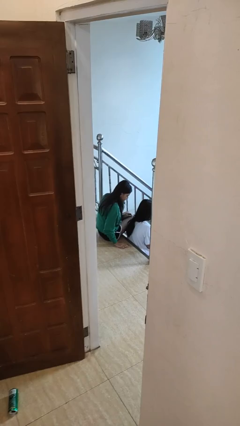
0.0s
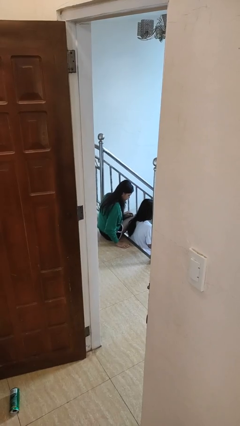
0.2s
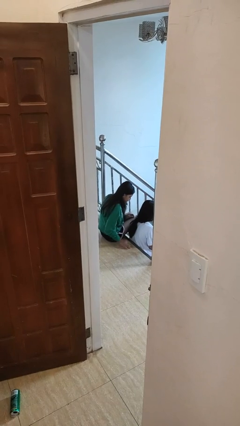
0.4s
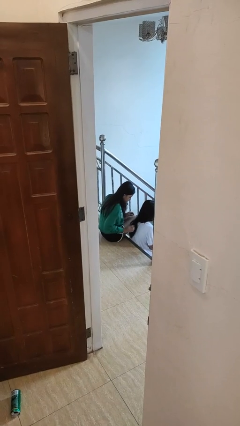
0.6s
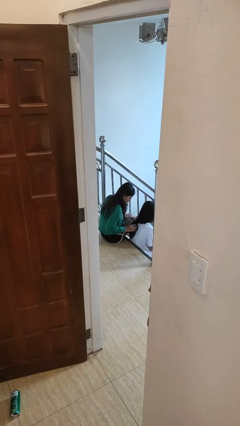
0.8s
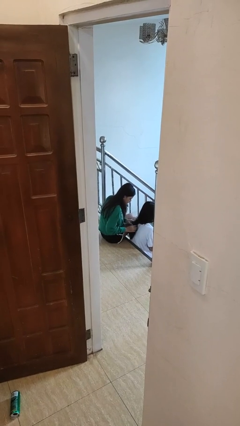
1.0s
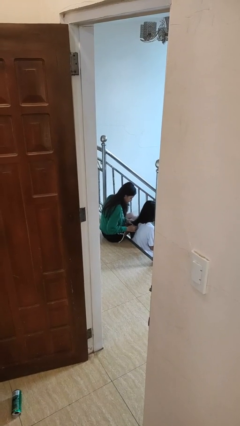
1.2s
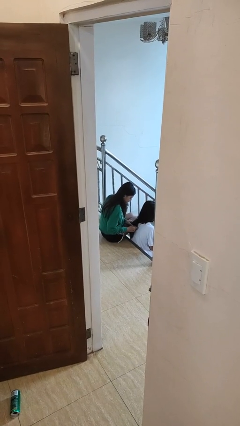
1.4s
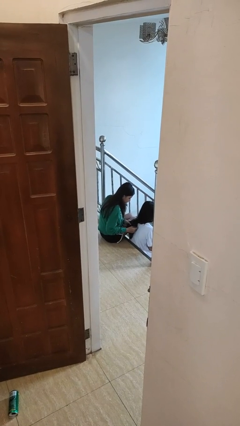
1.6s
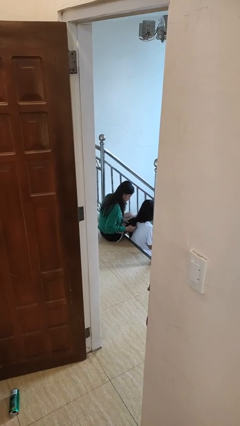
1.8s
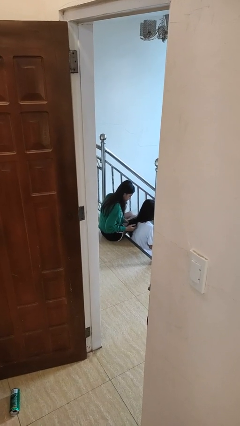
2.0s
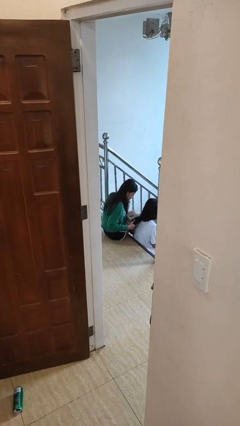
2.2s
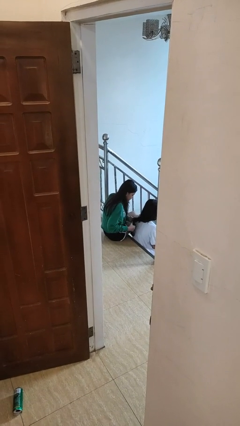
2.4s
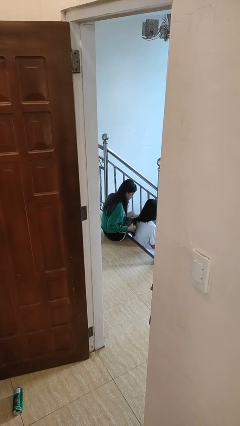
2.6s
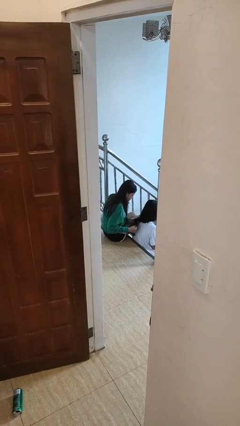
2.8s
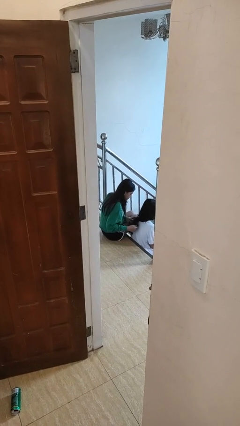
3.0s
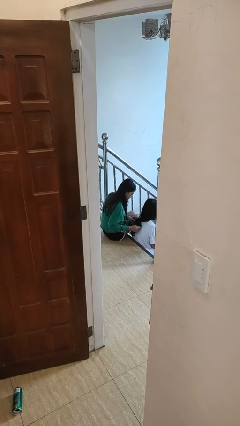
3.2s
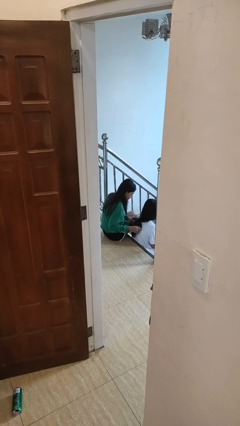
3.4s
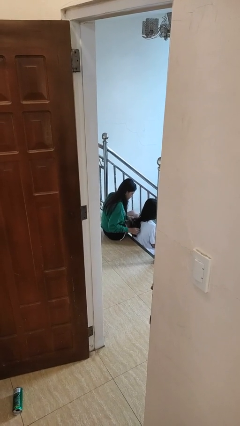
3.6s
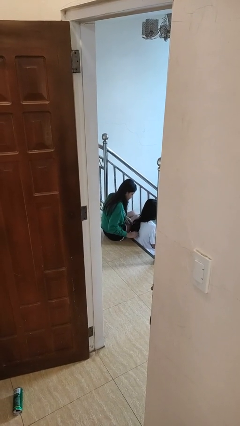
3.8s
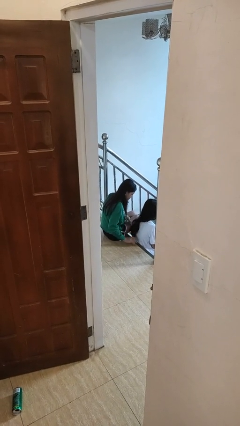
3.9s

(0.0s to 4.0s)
person braids hair of person

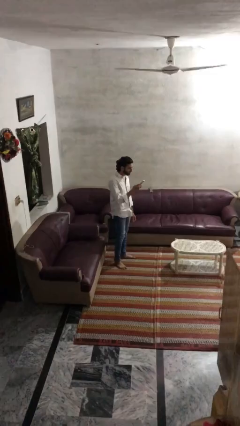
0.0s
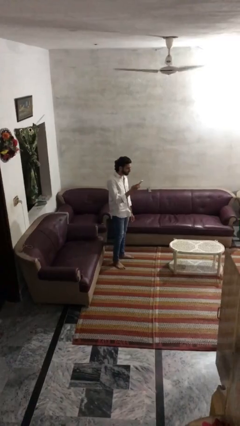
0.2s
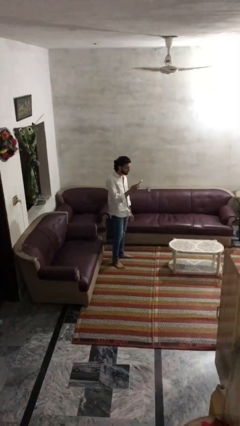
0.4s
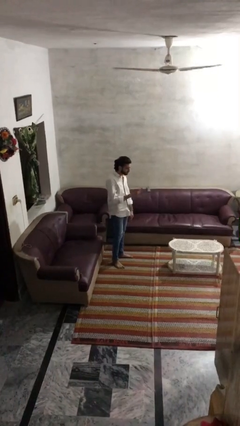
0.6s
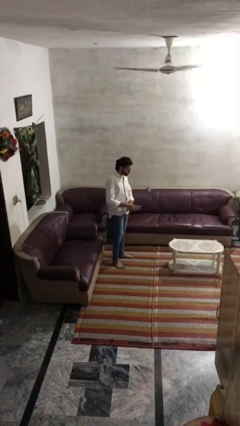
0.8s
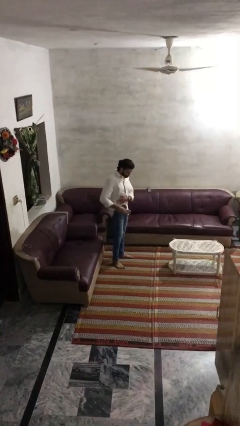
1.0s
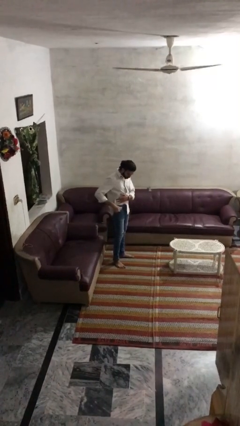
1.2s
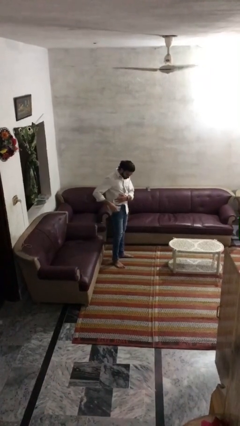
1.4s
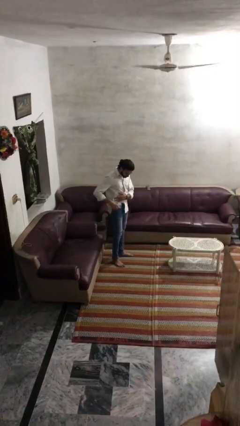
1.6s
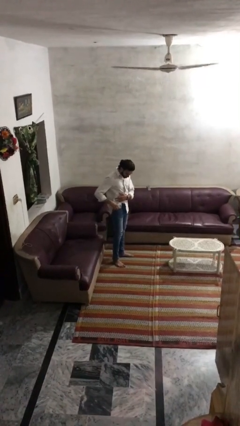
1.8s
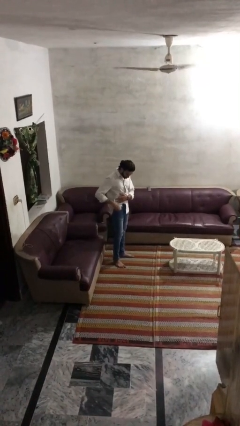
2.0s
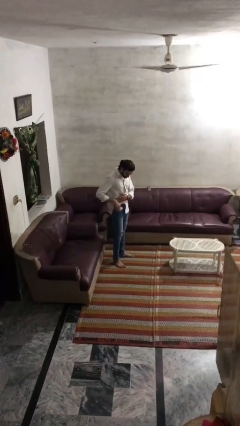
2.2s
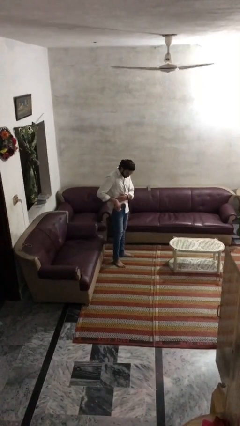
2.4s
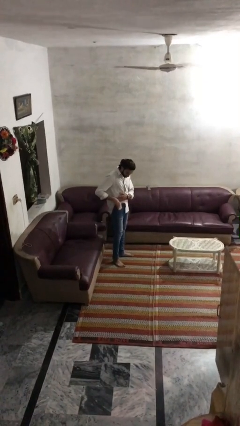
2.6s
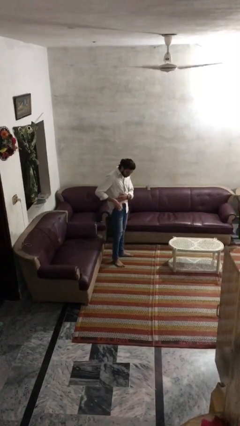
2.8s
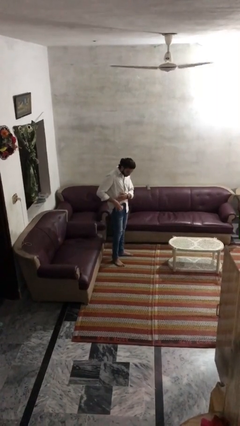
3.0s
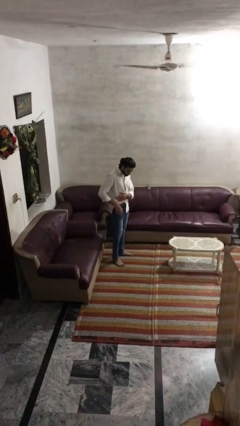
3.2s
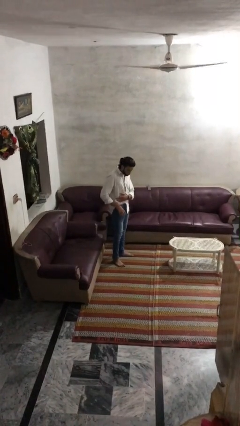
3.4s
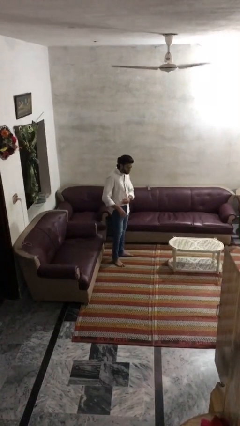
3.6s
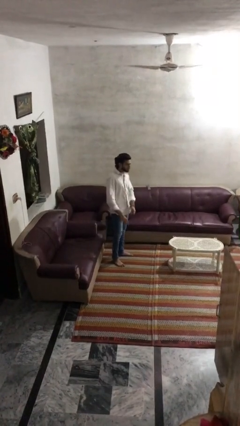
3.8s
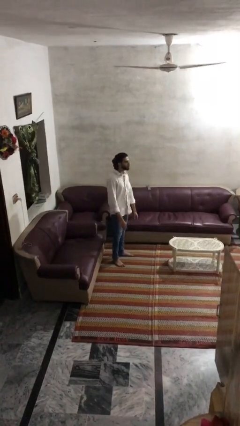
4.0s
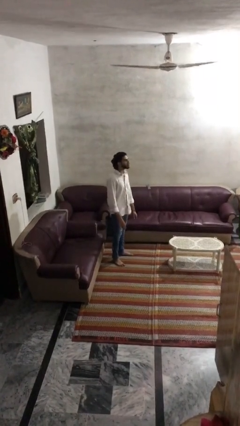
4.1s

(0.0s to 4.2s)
person puts phone into pocket

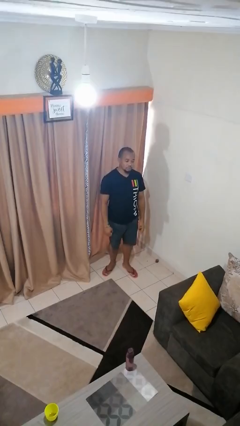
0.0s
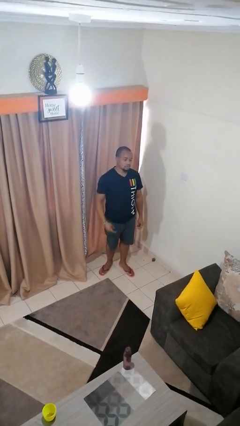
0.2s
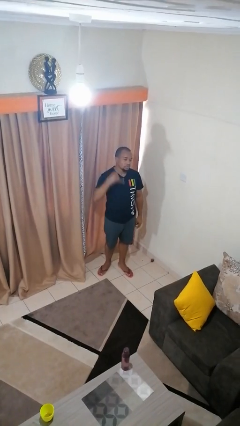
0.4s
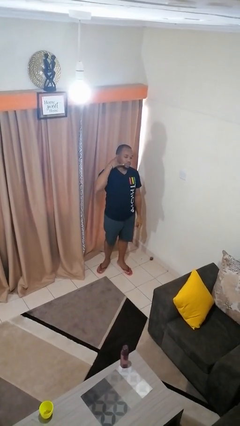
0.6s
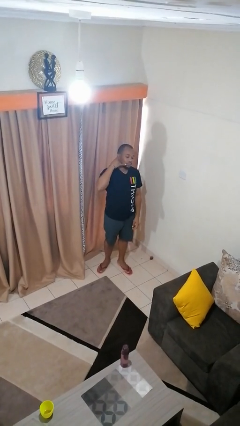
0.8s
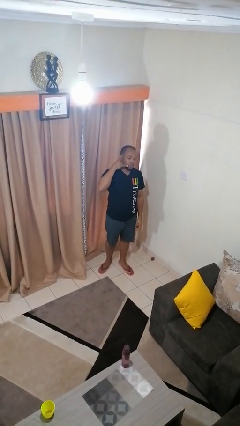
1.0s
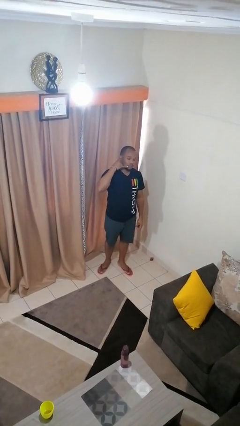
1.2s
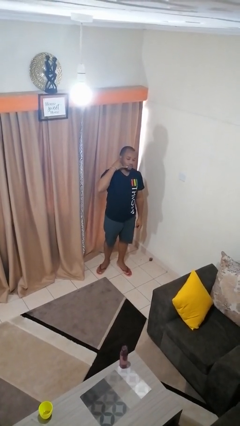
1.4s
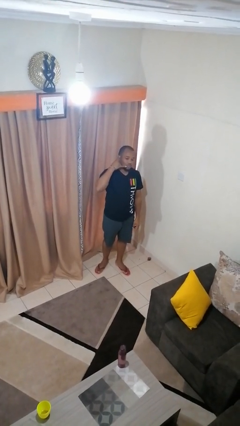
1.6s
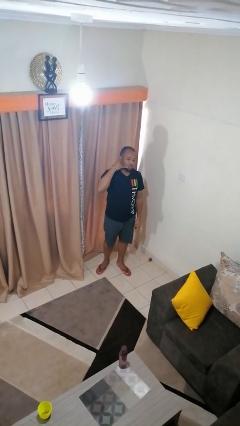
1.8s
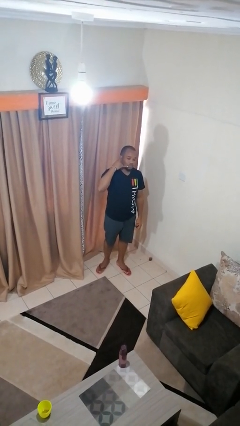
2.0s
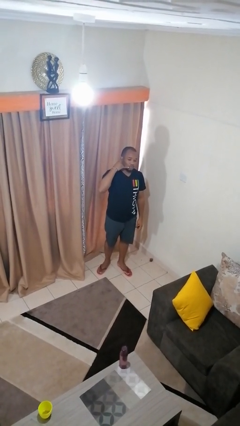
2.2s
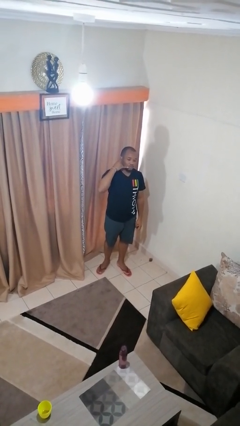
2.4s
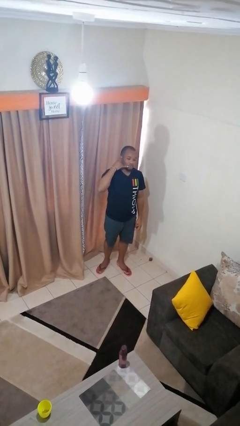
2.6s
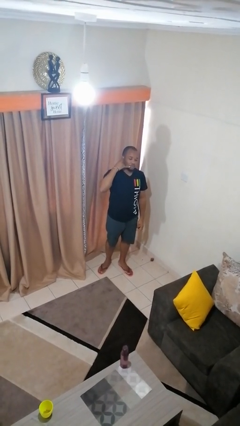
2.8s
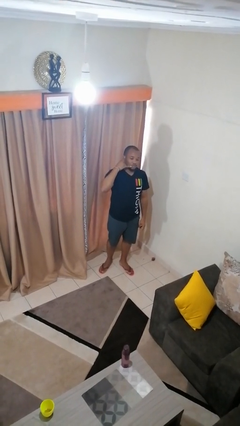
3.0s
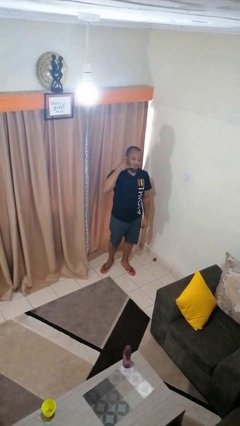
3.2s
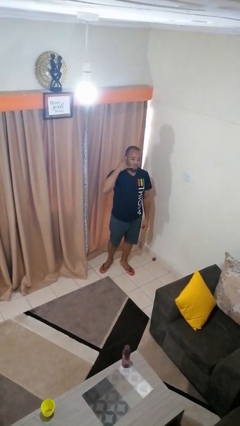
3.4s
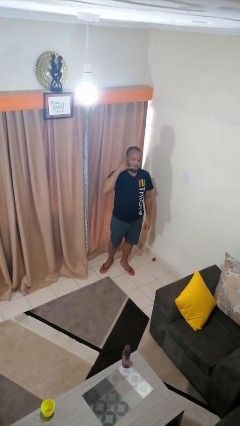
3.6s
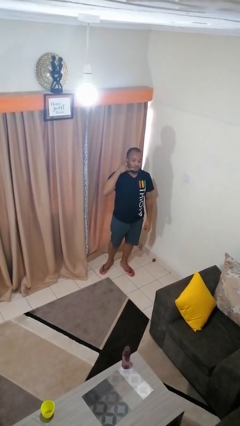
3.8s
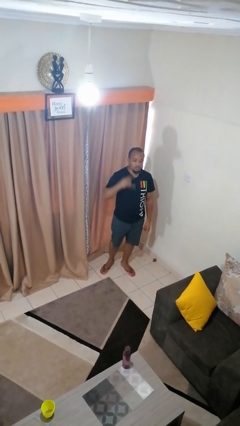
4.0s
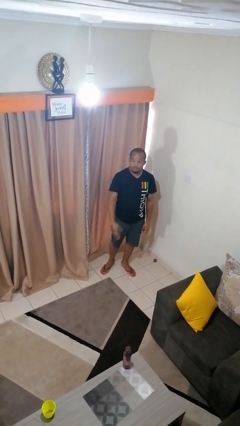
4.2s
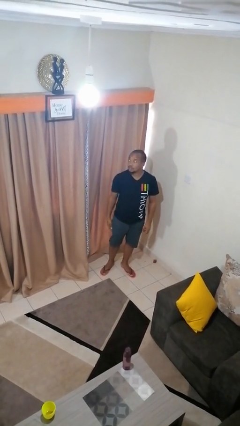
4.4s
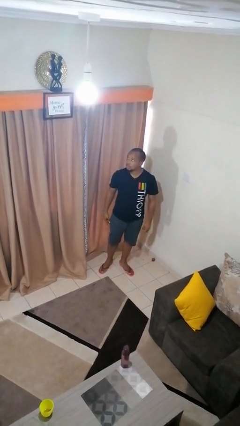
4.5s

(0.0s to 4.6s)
person gestures call me

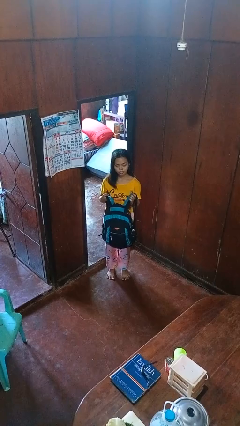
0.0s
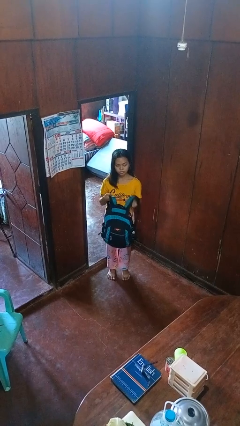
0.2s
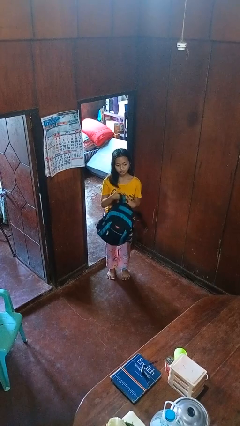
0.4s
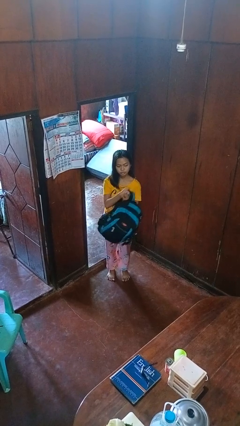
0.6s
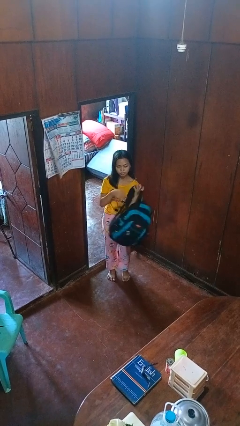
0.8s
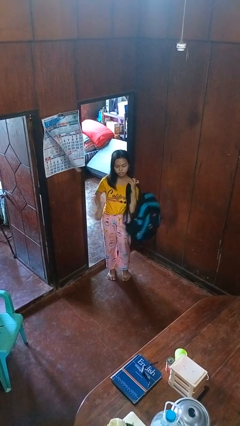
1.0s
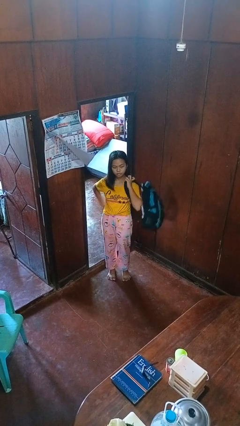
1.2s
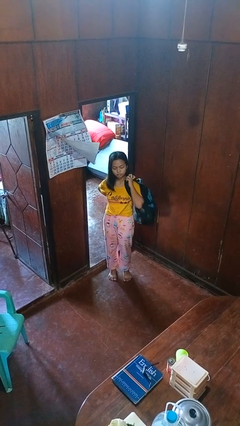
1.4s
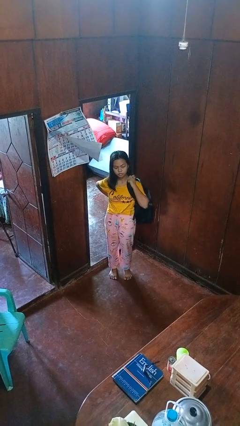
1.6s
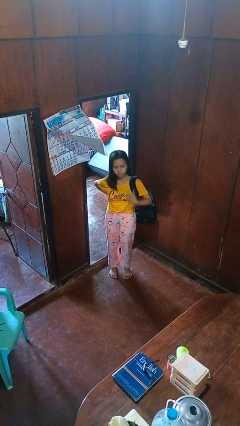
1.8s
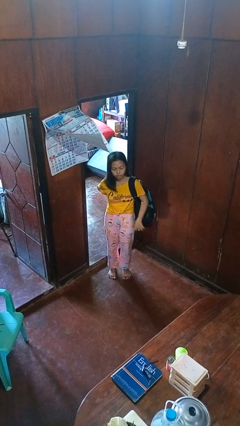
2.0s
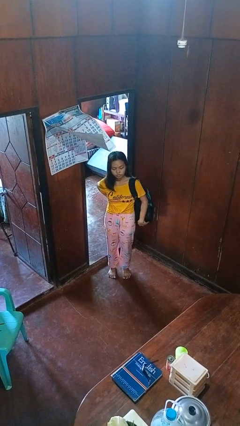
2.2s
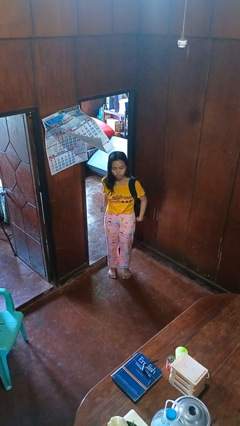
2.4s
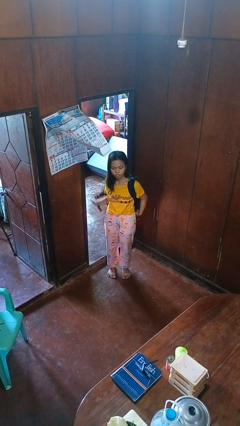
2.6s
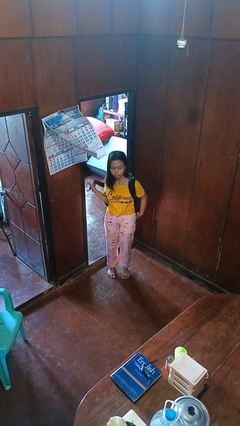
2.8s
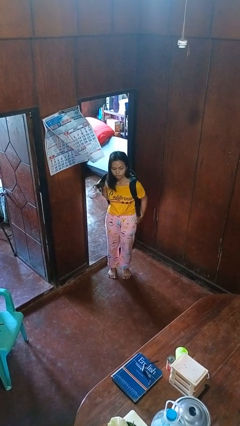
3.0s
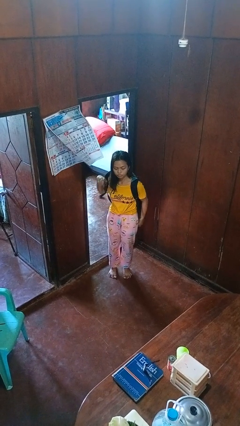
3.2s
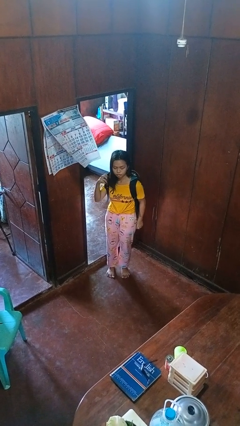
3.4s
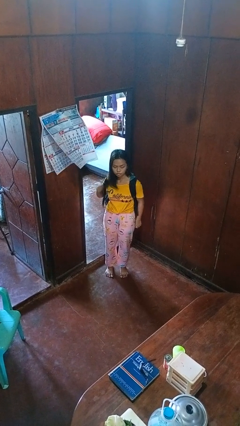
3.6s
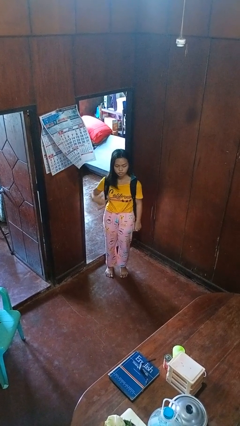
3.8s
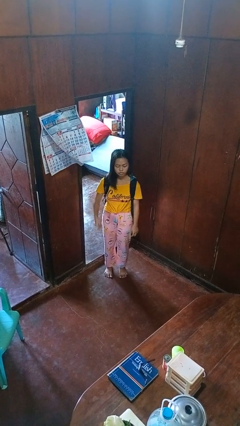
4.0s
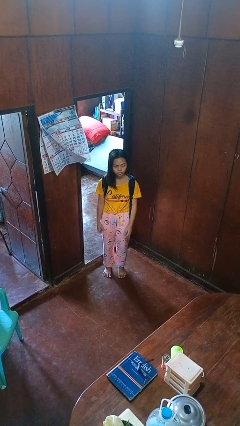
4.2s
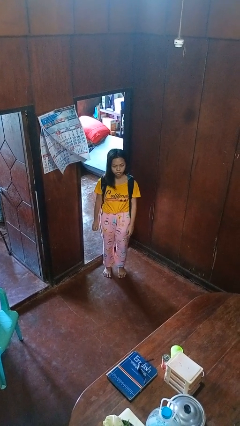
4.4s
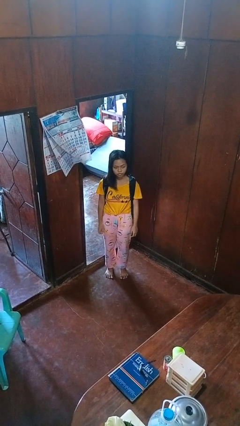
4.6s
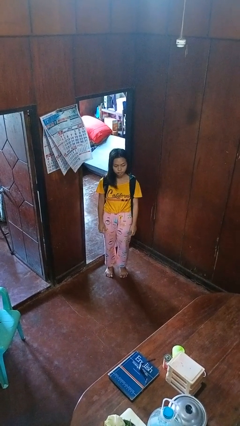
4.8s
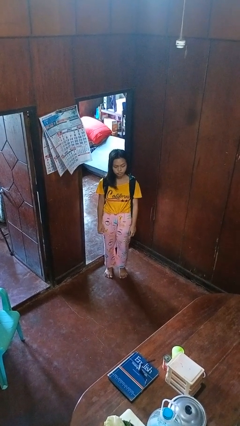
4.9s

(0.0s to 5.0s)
person puts on backpack

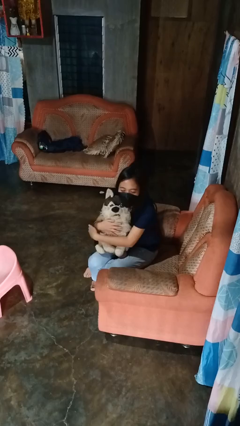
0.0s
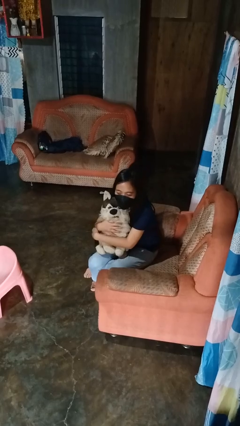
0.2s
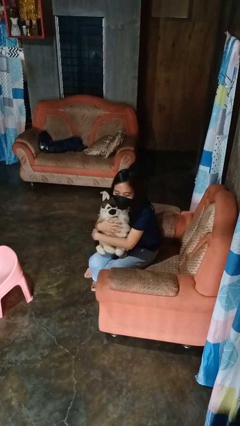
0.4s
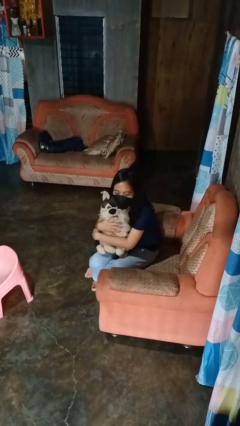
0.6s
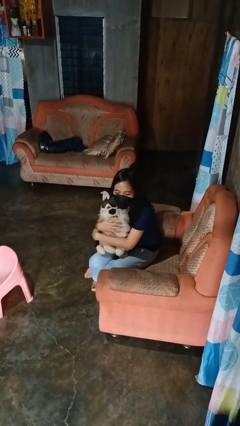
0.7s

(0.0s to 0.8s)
person hugs stuffed animal
